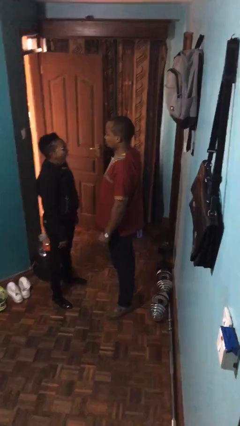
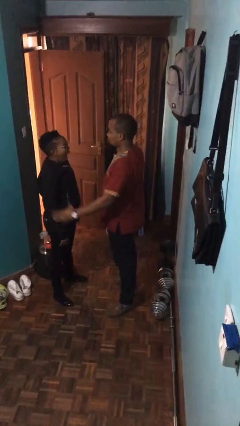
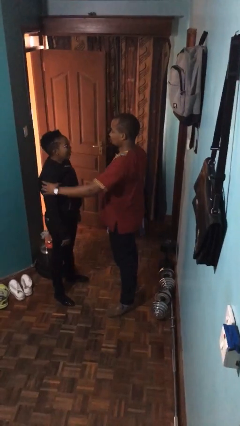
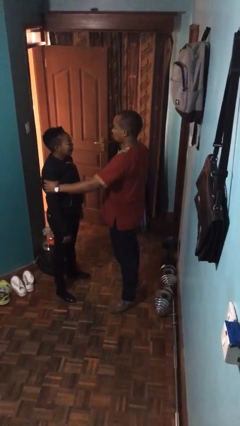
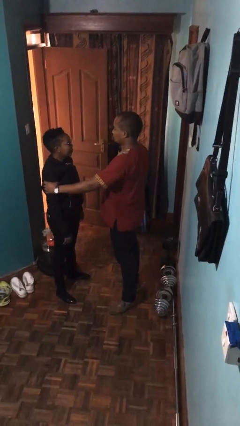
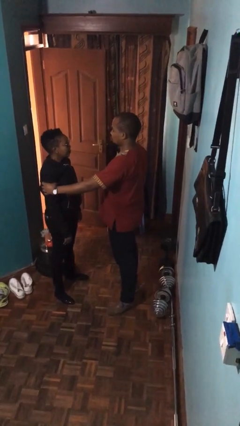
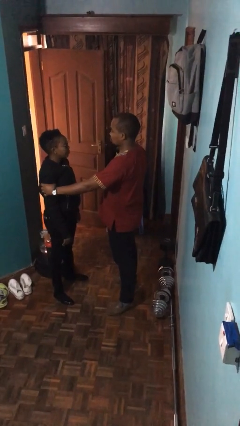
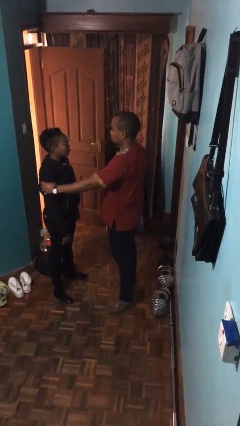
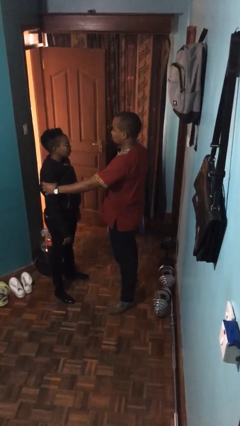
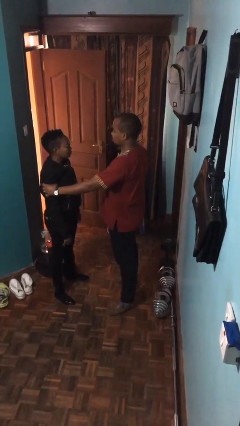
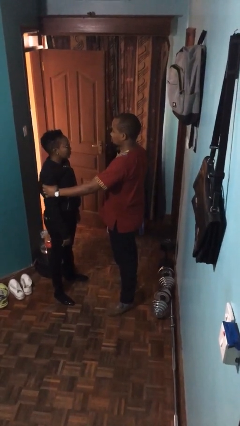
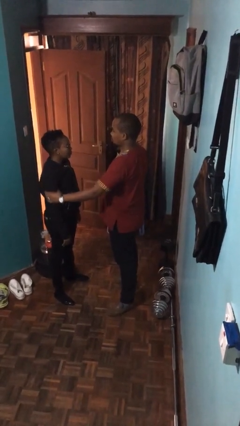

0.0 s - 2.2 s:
person grabs person by bicep

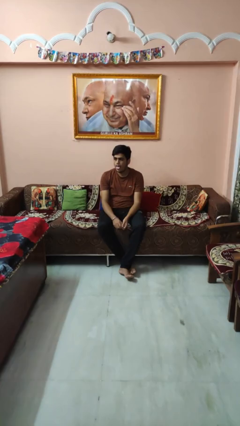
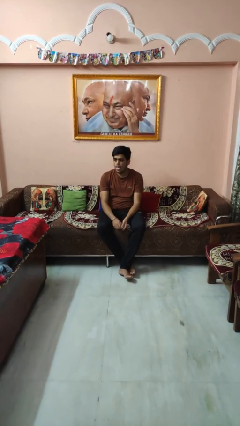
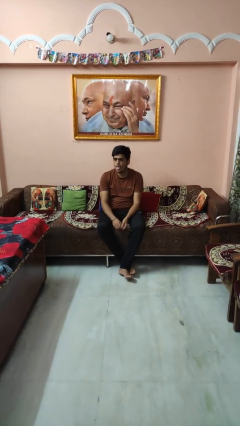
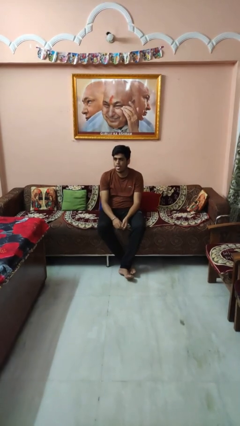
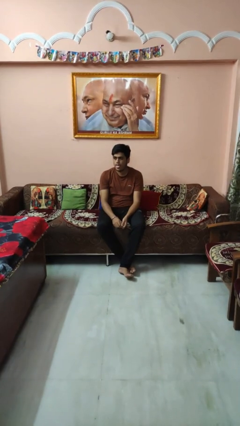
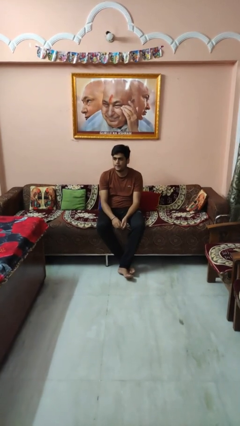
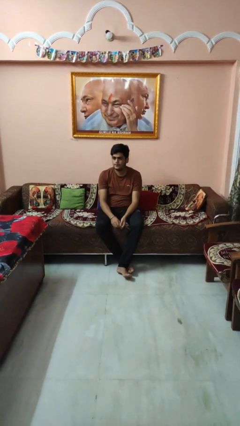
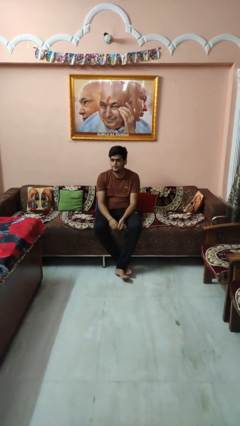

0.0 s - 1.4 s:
person sticks out tongue

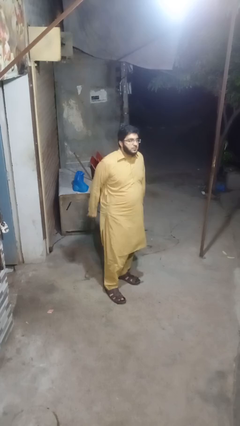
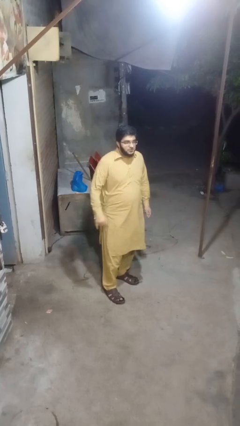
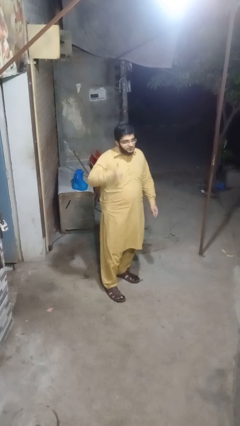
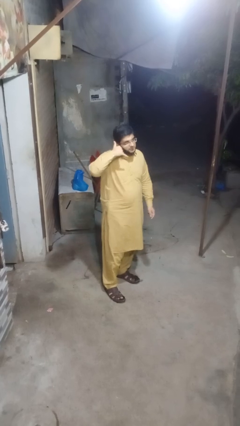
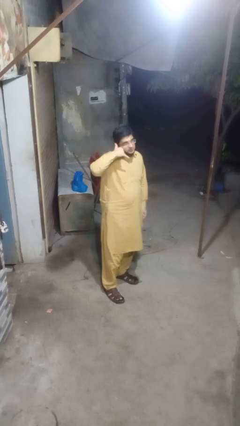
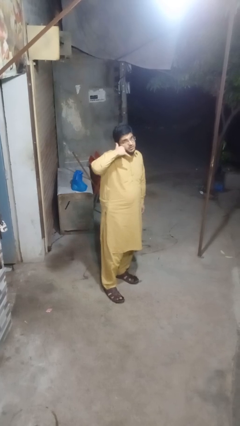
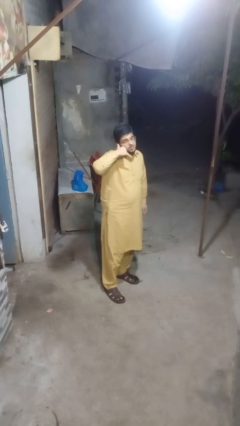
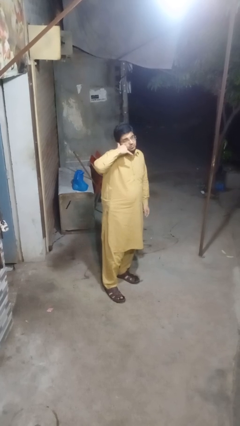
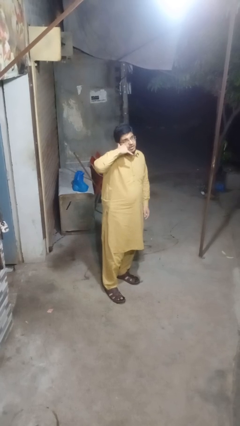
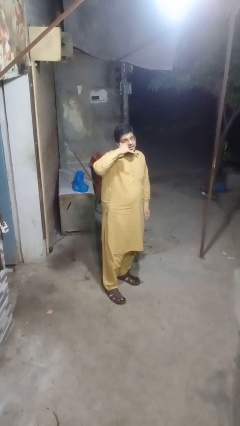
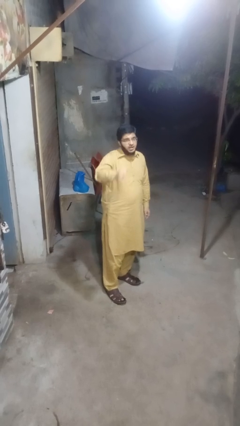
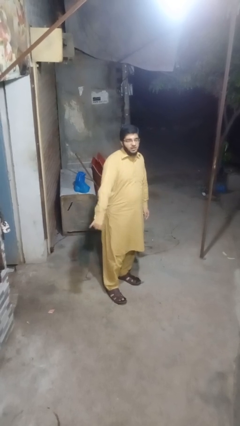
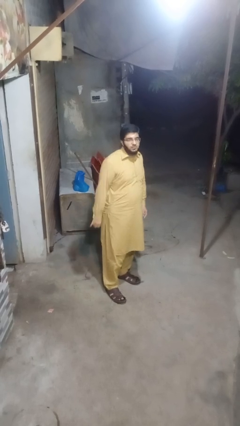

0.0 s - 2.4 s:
person gestures call me

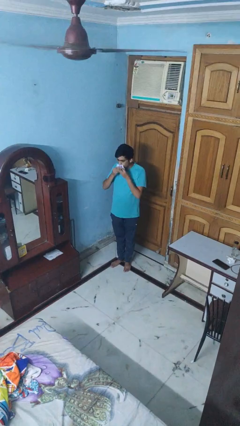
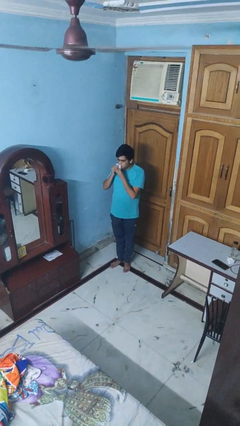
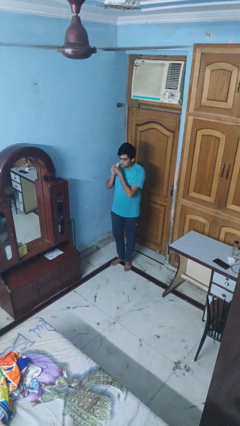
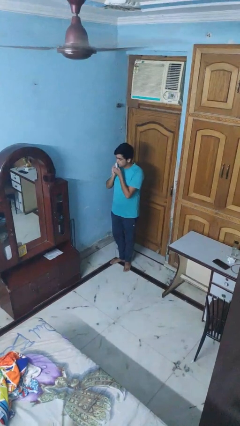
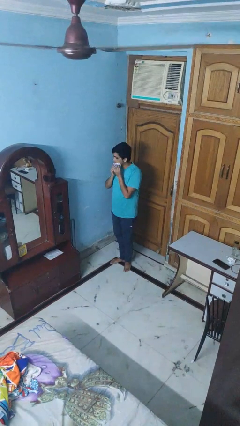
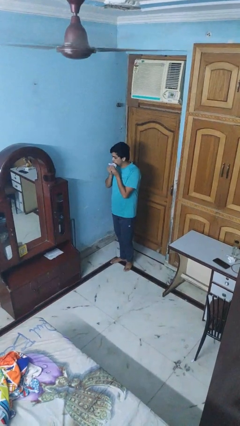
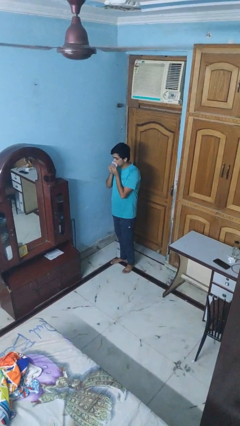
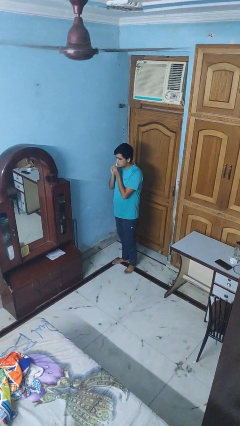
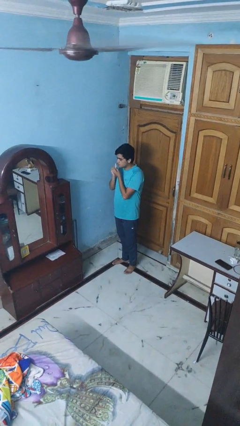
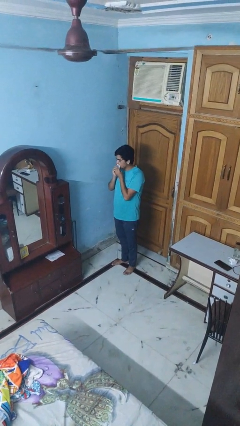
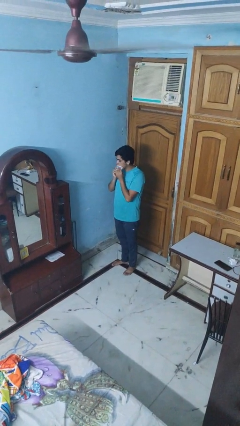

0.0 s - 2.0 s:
person wipes mouth with napkin

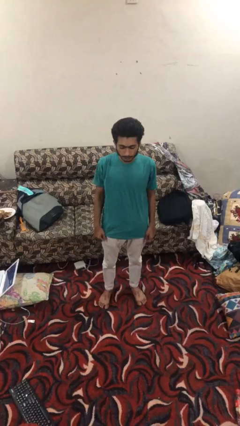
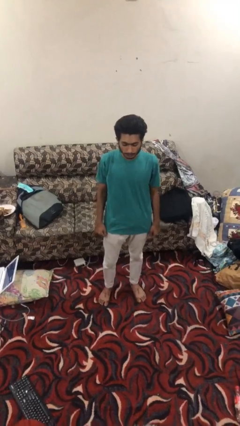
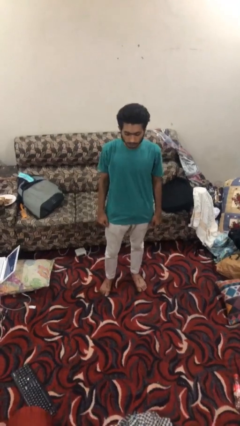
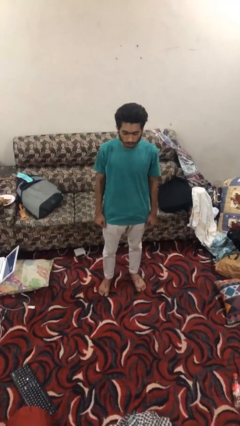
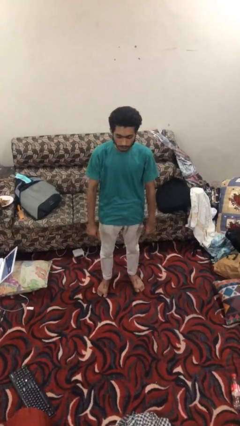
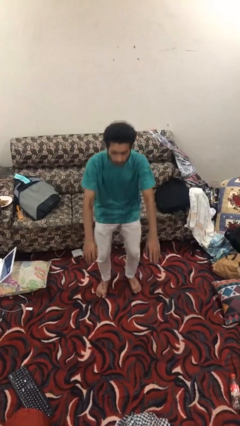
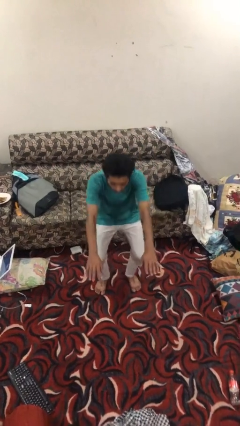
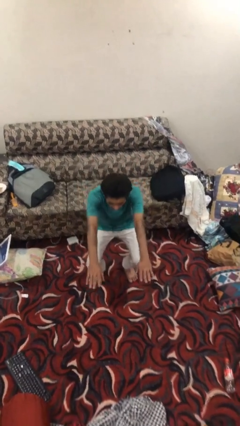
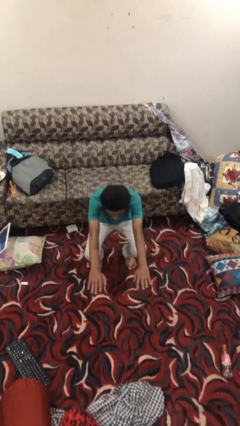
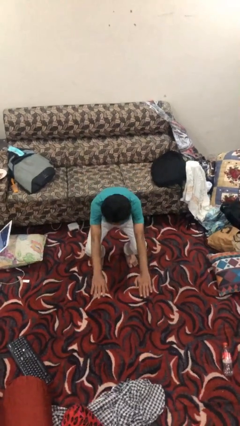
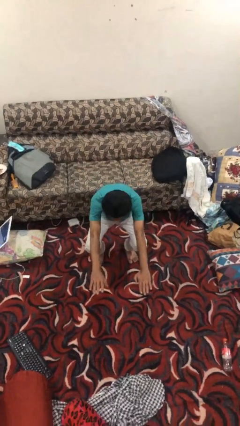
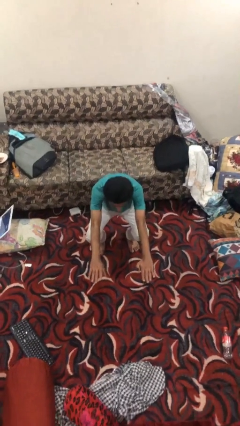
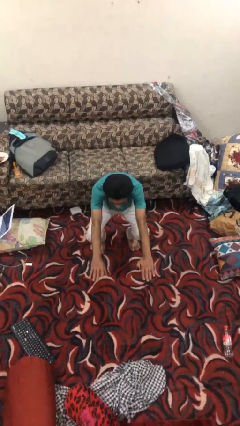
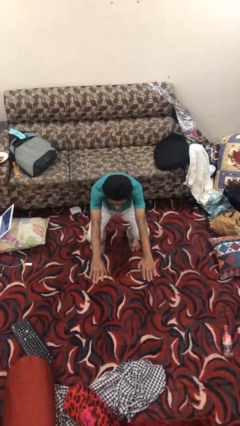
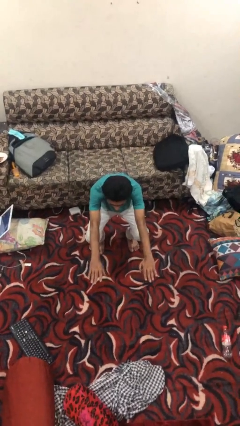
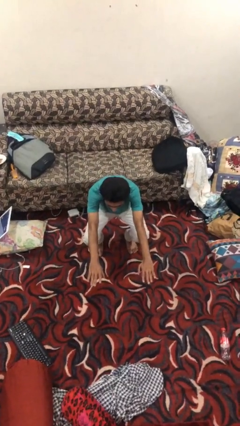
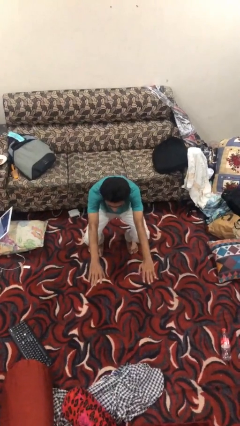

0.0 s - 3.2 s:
person squats

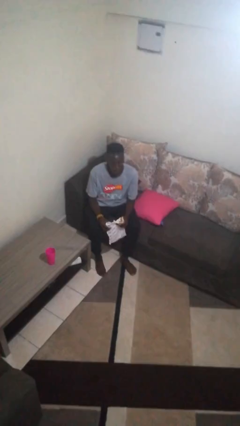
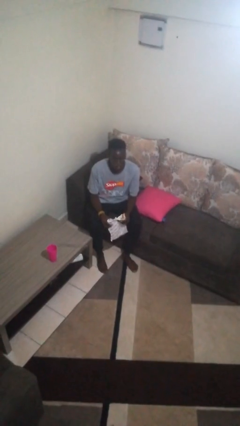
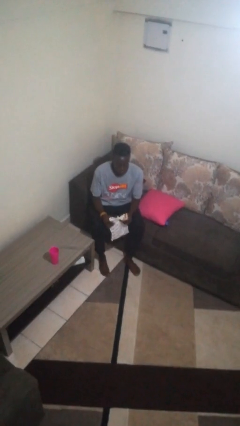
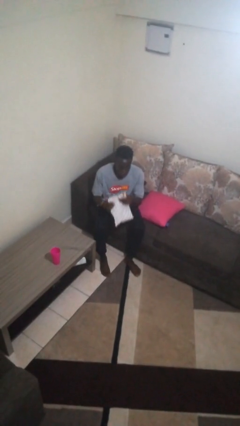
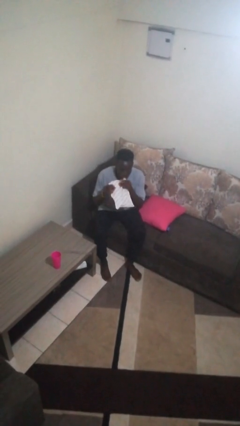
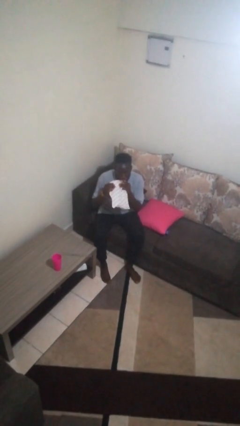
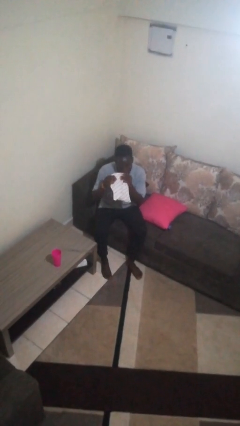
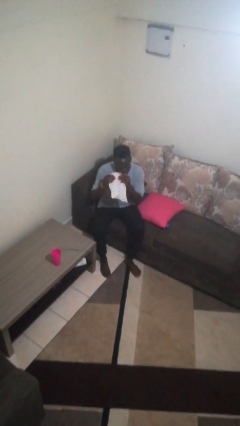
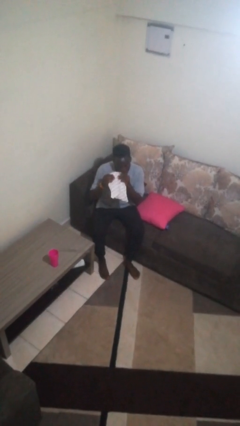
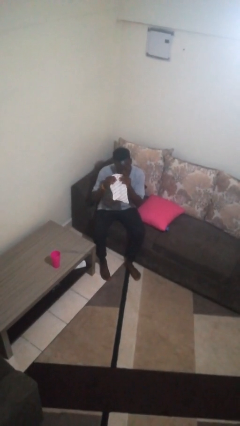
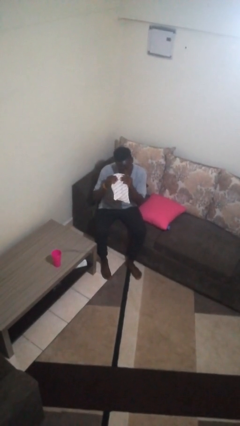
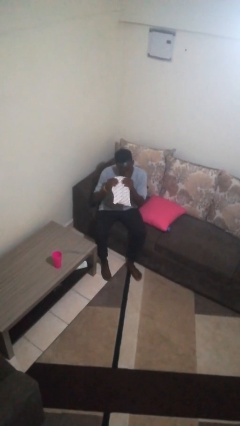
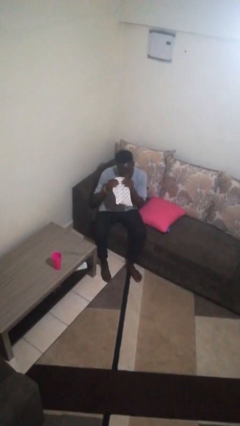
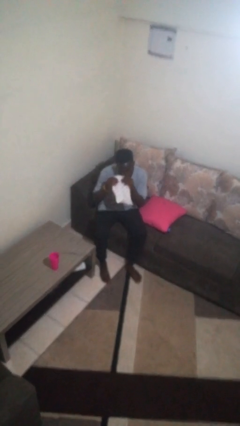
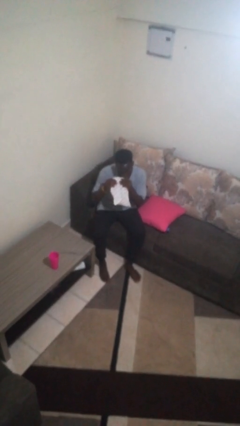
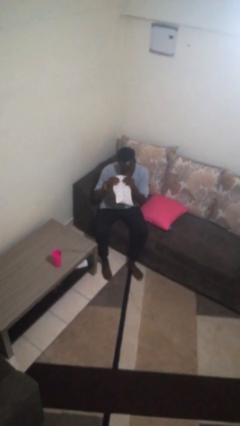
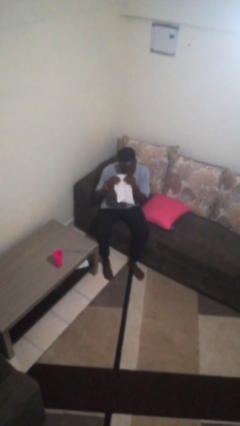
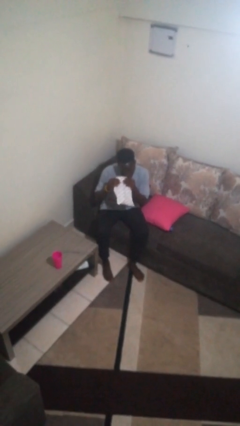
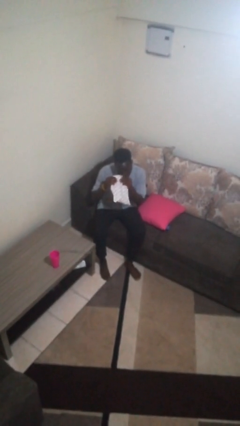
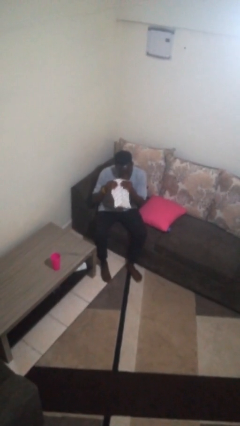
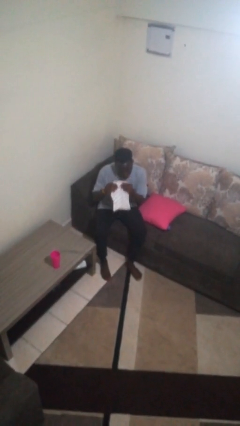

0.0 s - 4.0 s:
person eats snack from bag

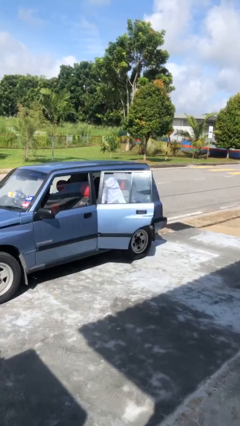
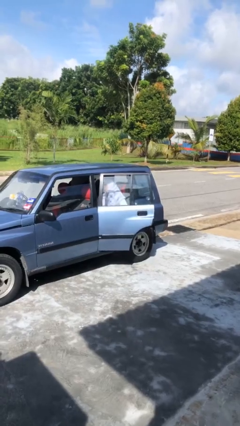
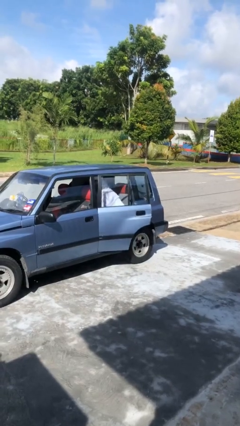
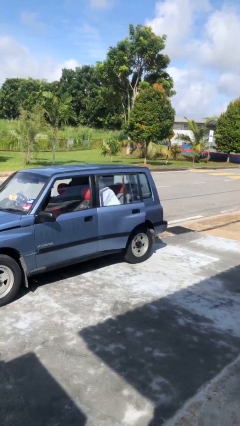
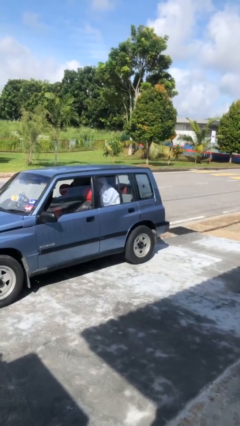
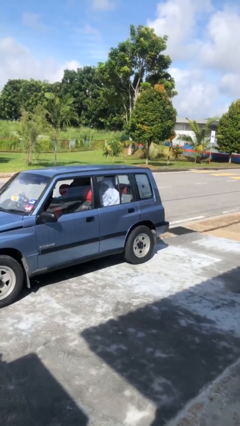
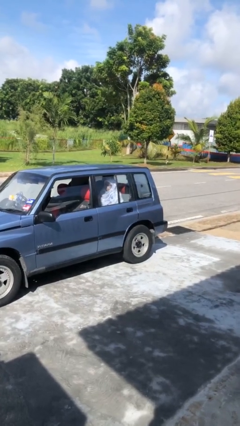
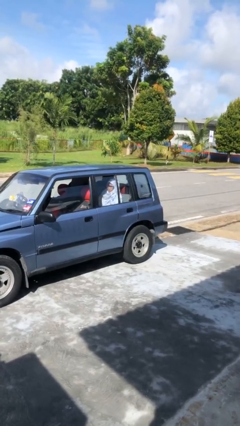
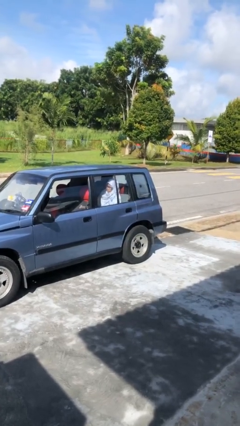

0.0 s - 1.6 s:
person closes car door

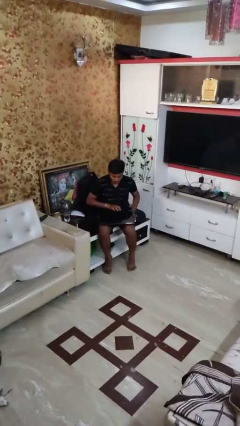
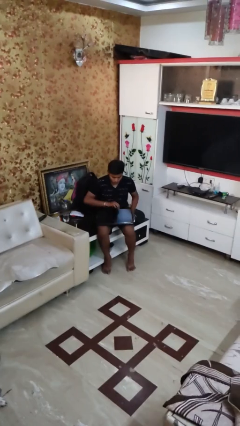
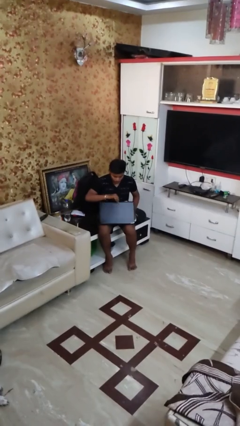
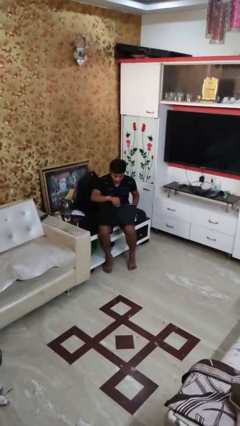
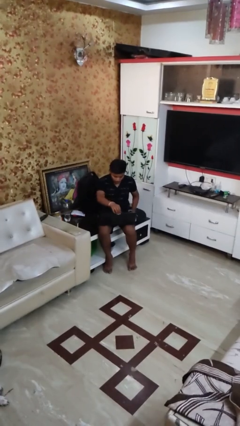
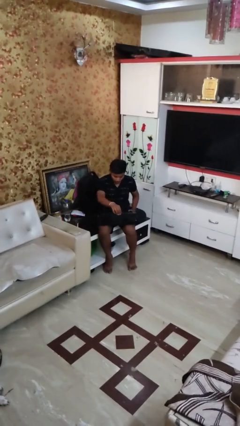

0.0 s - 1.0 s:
person opens laptop
